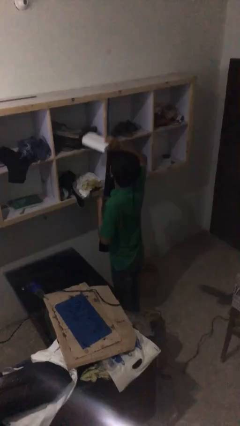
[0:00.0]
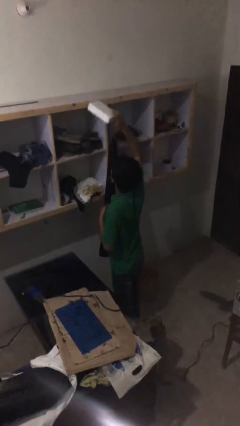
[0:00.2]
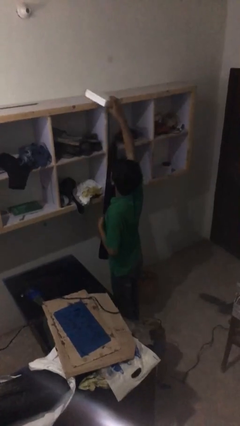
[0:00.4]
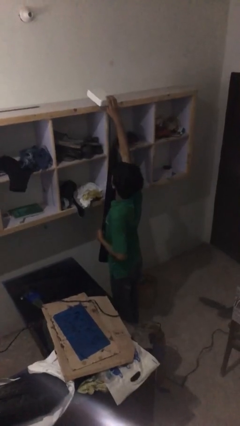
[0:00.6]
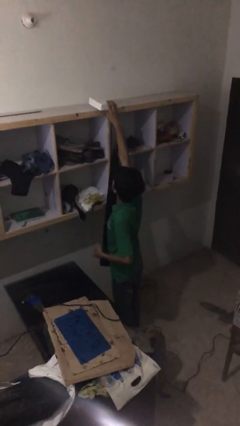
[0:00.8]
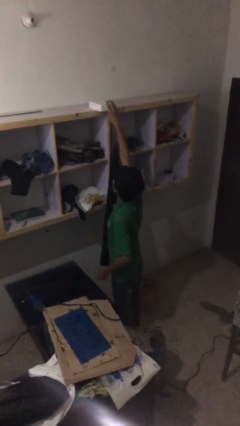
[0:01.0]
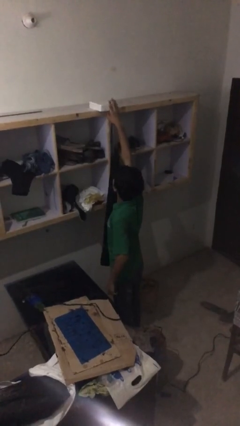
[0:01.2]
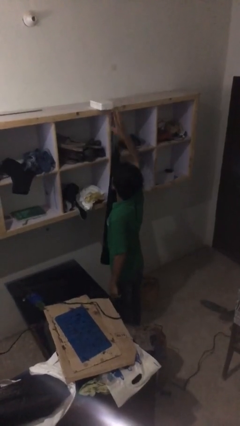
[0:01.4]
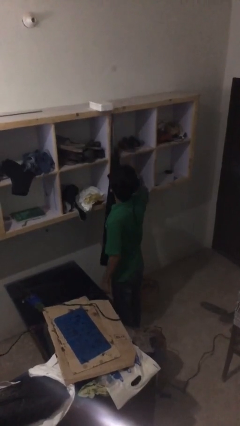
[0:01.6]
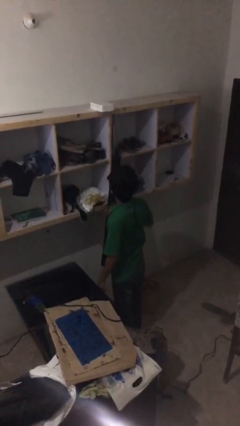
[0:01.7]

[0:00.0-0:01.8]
person puts down object on shelf

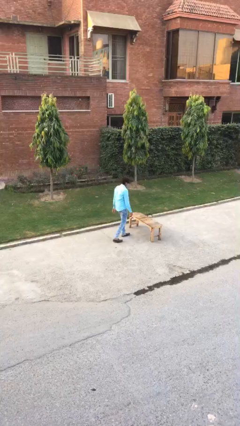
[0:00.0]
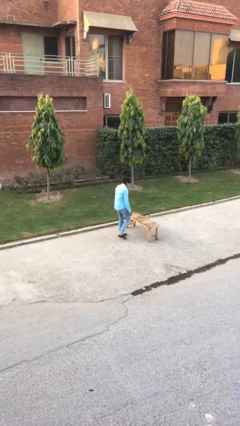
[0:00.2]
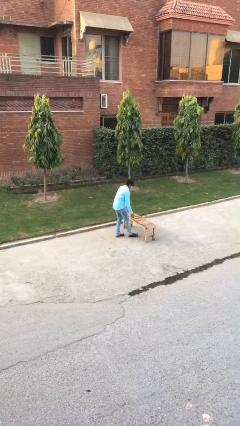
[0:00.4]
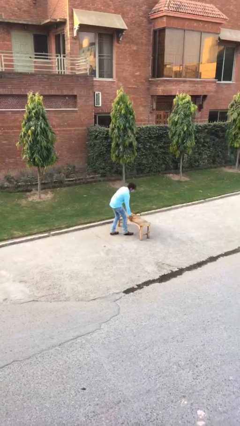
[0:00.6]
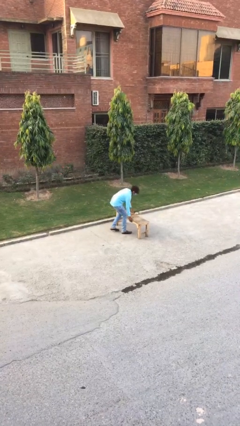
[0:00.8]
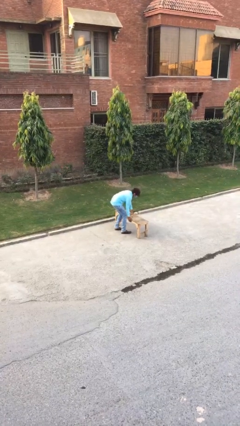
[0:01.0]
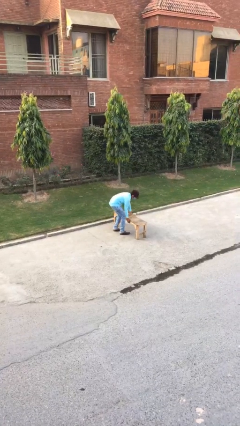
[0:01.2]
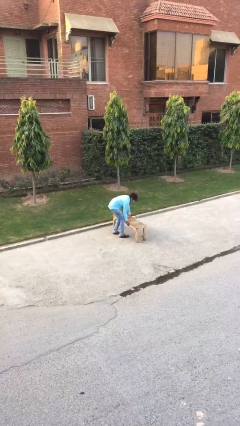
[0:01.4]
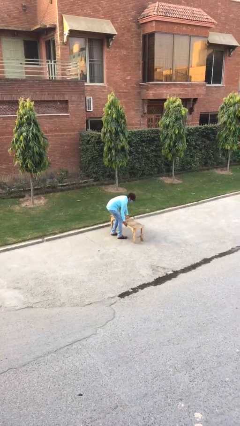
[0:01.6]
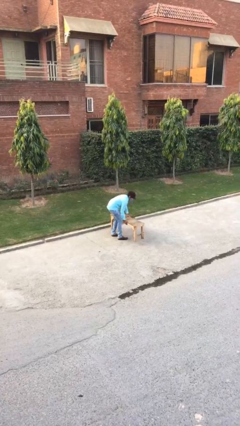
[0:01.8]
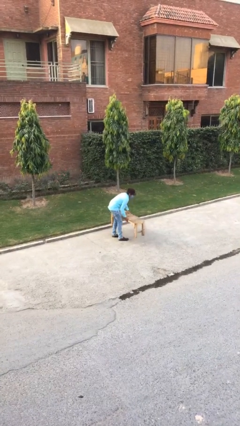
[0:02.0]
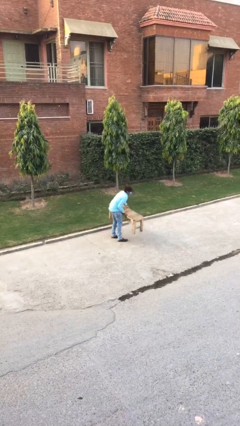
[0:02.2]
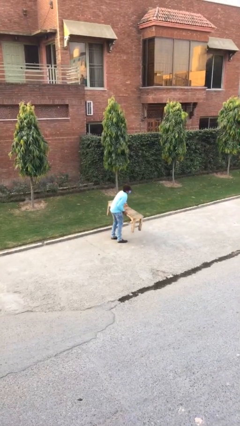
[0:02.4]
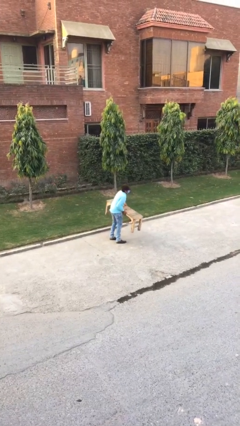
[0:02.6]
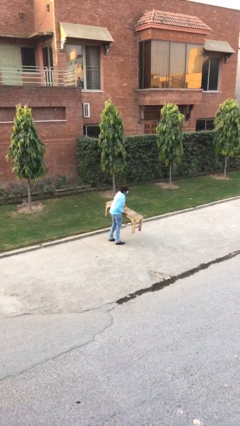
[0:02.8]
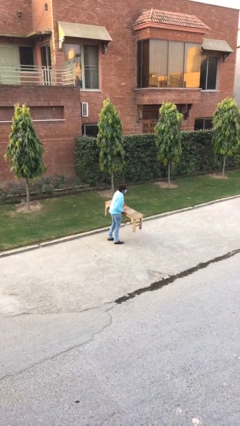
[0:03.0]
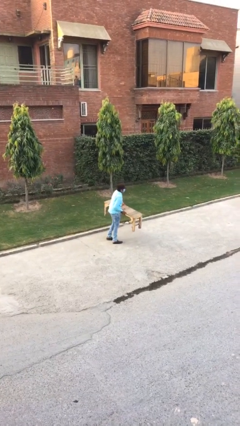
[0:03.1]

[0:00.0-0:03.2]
person picks up object from floor

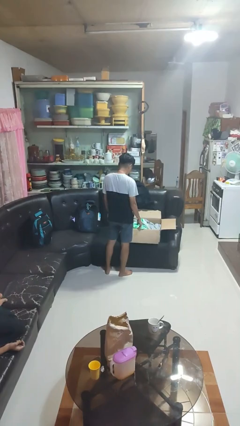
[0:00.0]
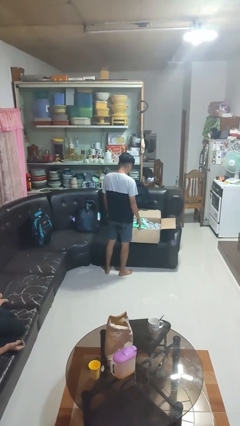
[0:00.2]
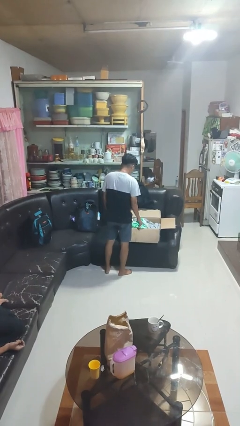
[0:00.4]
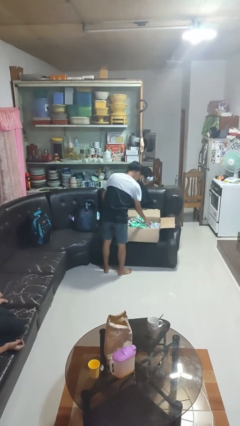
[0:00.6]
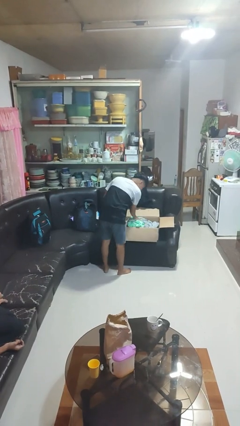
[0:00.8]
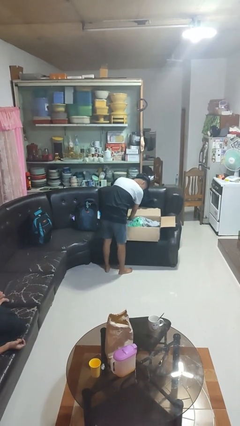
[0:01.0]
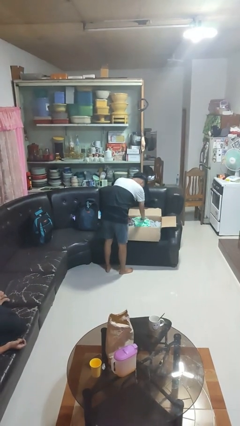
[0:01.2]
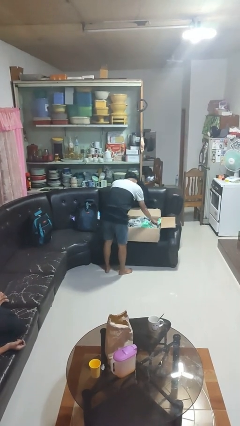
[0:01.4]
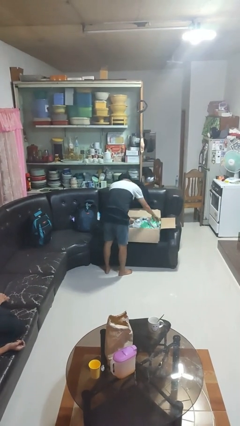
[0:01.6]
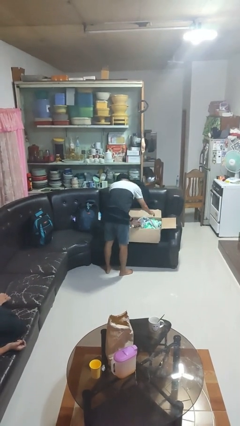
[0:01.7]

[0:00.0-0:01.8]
person searches in box

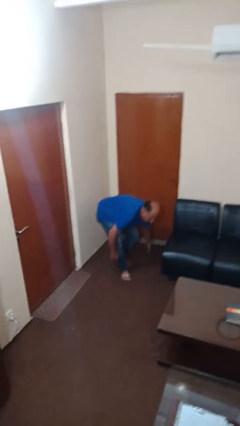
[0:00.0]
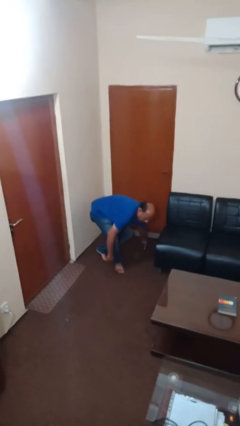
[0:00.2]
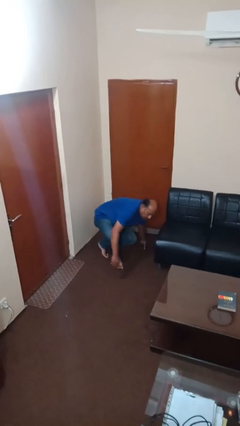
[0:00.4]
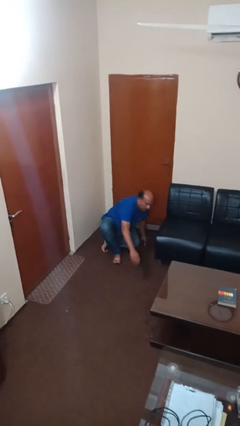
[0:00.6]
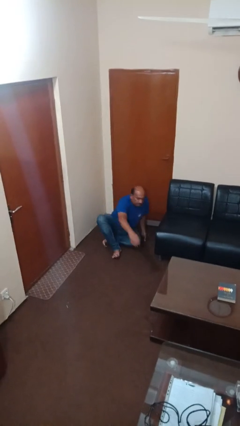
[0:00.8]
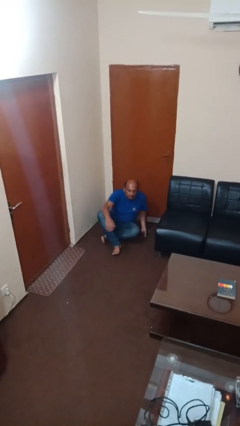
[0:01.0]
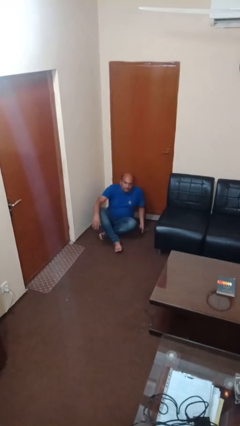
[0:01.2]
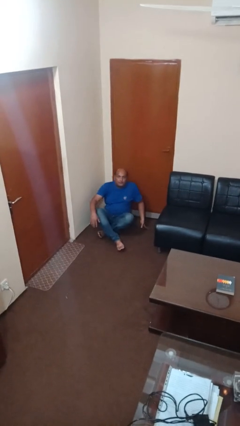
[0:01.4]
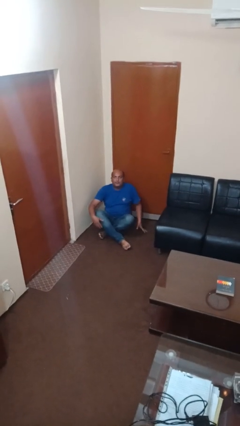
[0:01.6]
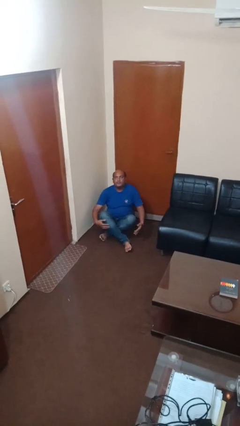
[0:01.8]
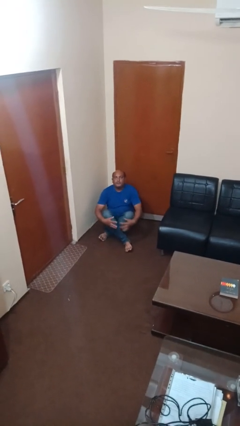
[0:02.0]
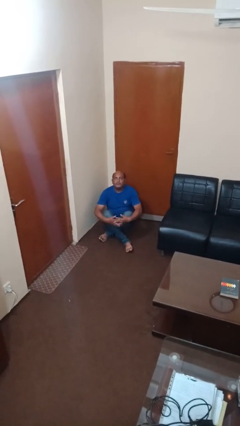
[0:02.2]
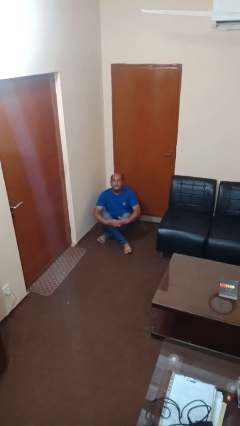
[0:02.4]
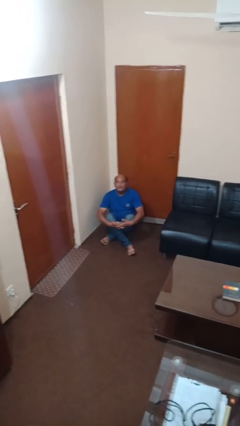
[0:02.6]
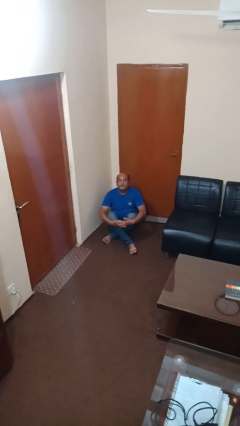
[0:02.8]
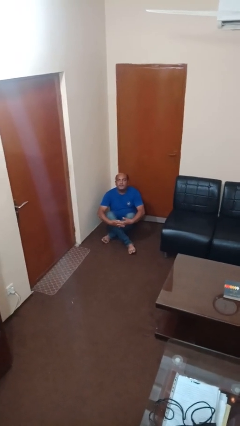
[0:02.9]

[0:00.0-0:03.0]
person sits crisscross

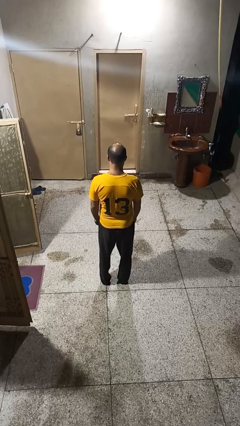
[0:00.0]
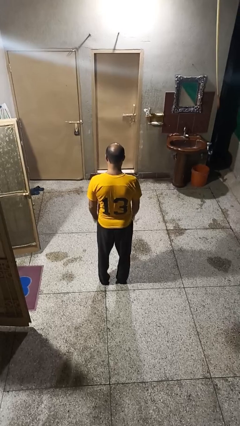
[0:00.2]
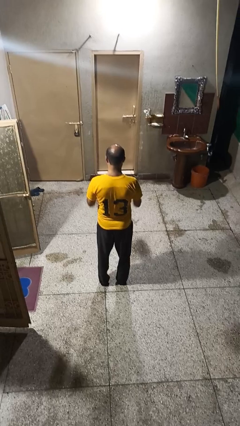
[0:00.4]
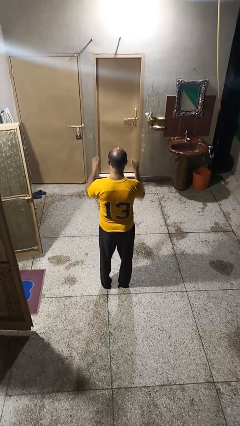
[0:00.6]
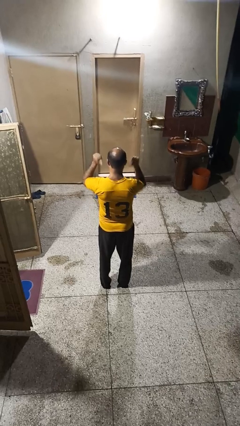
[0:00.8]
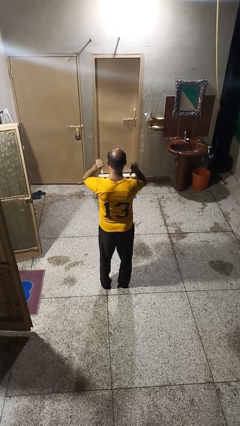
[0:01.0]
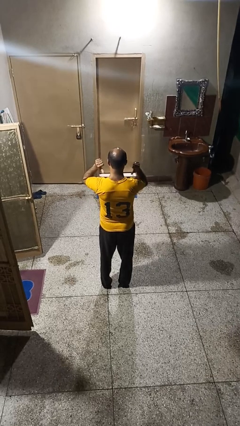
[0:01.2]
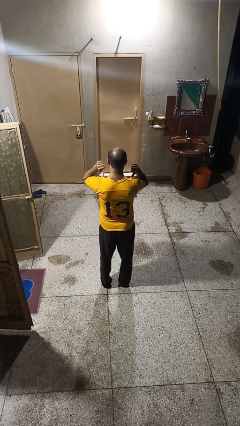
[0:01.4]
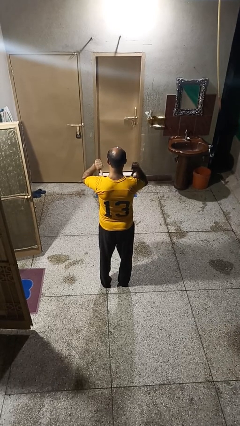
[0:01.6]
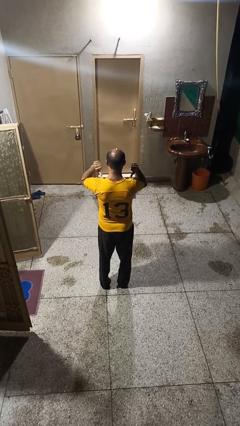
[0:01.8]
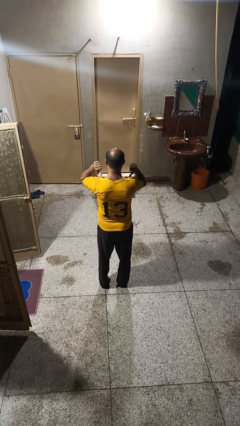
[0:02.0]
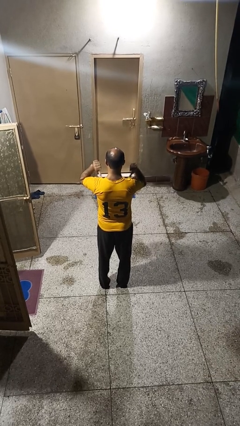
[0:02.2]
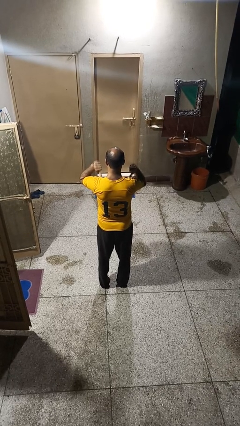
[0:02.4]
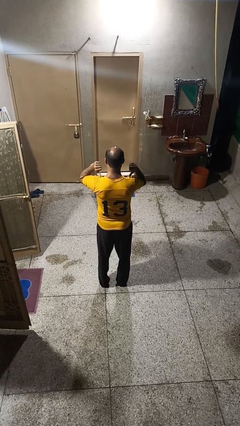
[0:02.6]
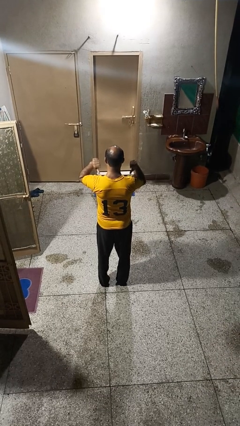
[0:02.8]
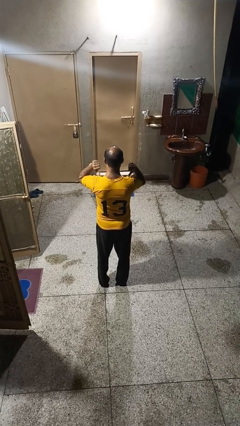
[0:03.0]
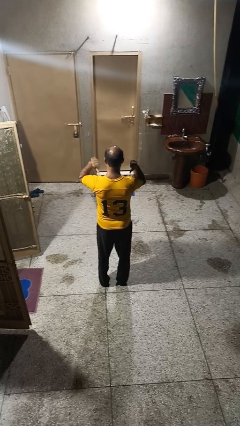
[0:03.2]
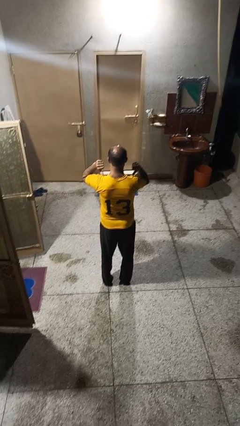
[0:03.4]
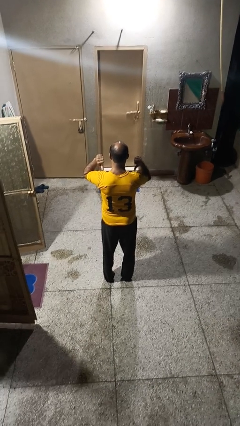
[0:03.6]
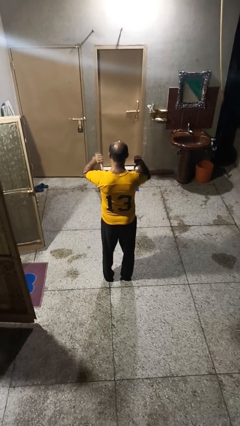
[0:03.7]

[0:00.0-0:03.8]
person gestures behind me

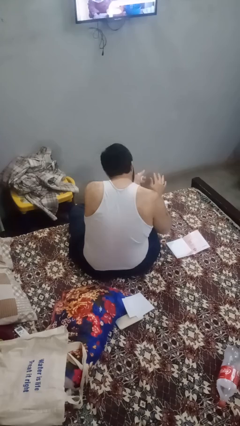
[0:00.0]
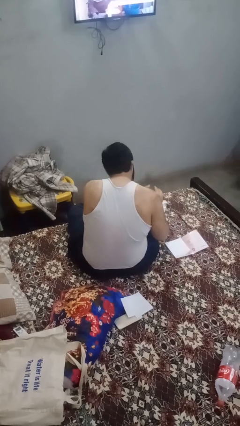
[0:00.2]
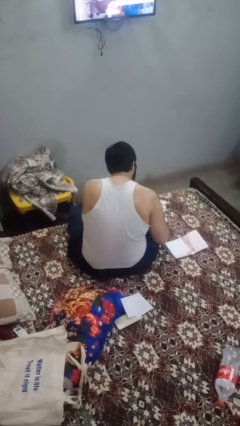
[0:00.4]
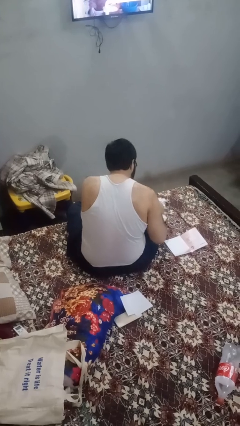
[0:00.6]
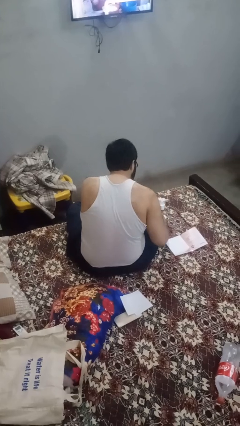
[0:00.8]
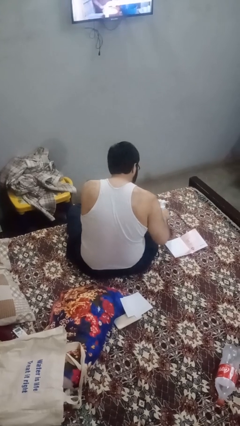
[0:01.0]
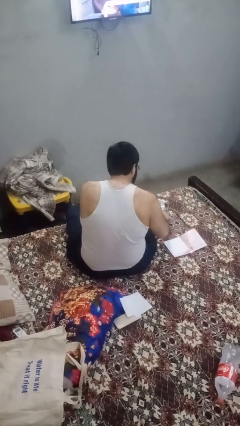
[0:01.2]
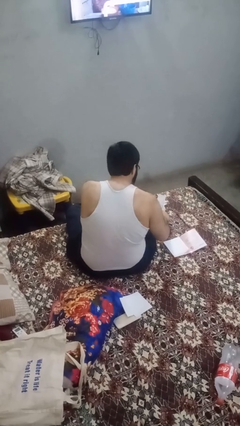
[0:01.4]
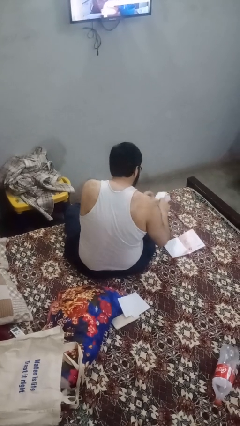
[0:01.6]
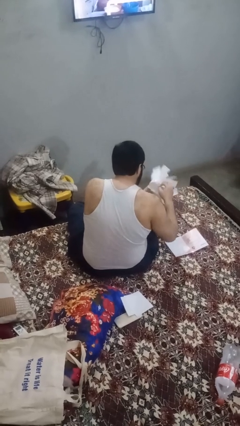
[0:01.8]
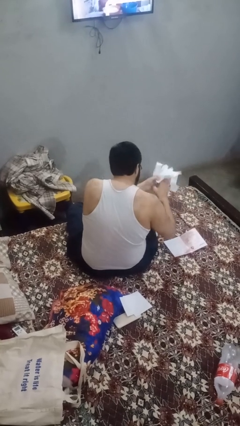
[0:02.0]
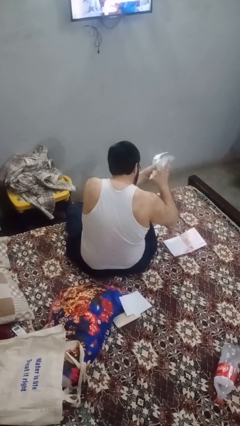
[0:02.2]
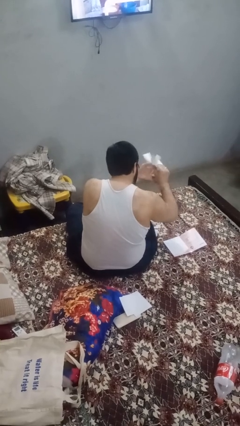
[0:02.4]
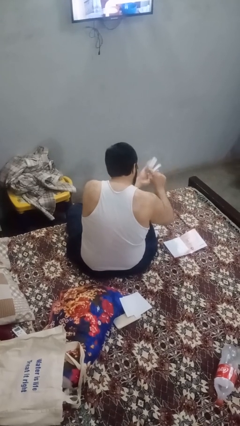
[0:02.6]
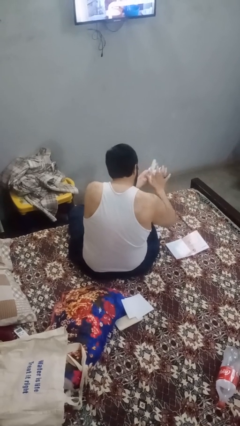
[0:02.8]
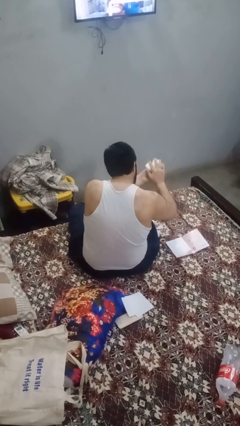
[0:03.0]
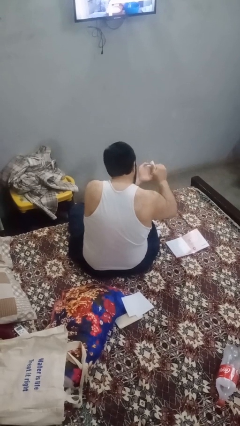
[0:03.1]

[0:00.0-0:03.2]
person crumples paper

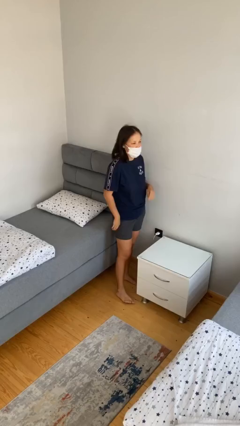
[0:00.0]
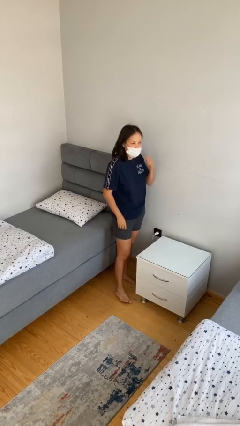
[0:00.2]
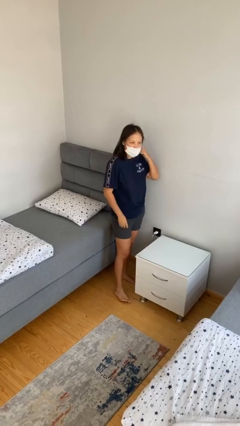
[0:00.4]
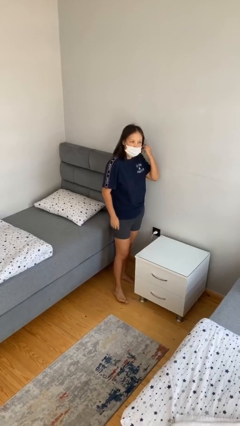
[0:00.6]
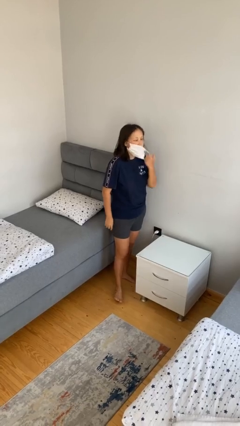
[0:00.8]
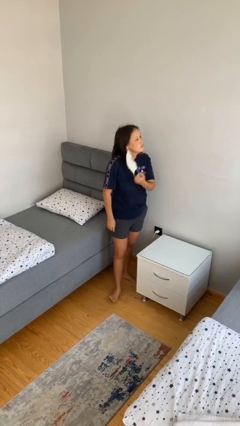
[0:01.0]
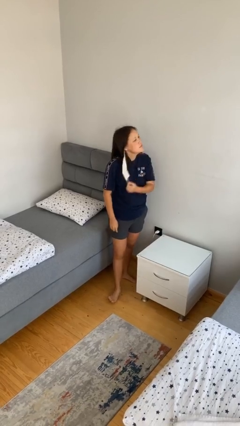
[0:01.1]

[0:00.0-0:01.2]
person takes off facemask
